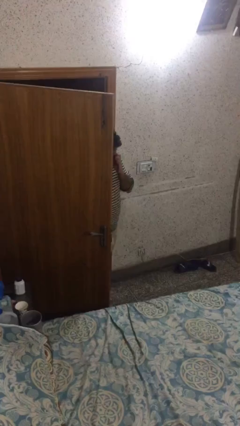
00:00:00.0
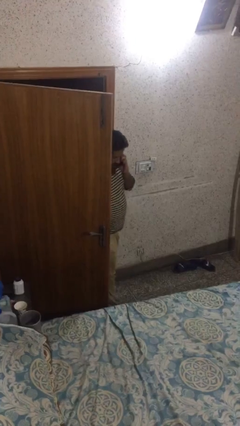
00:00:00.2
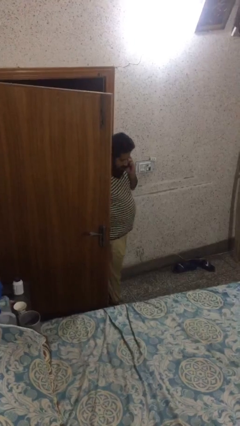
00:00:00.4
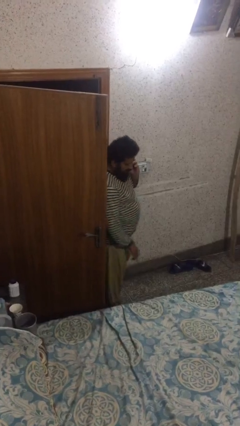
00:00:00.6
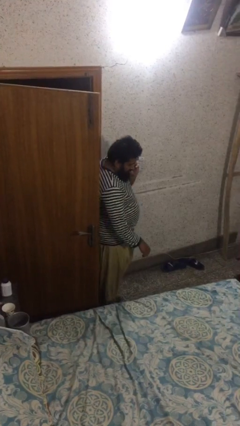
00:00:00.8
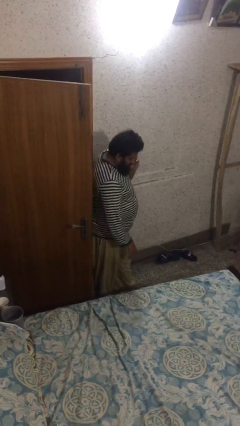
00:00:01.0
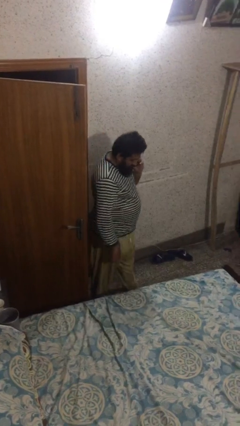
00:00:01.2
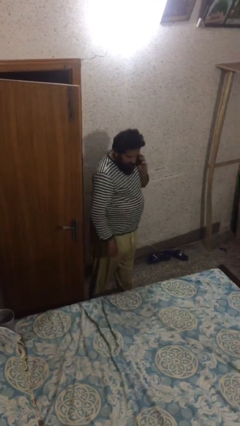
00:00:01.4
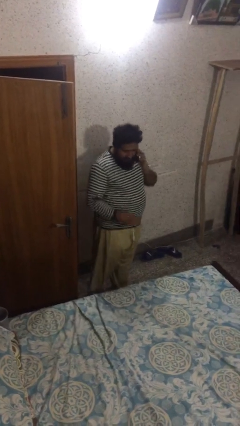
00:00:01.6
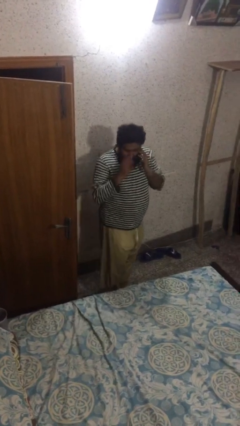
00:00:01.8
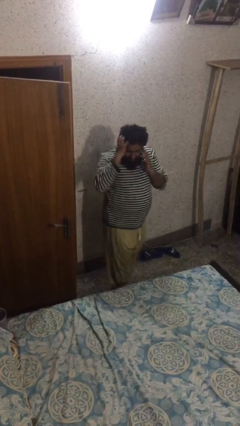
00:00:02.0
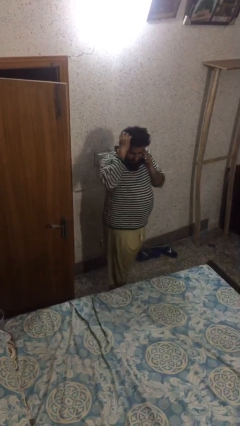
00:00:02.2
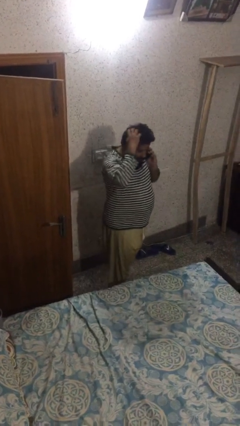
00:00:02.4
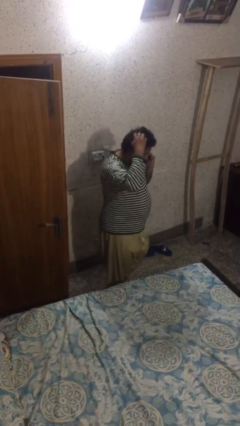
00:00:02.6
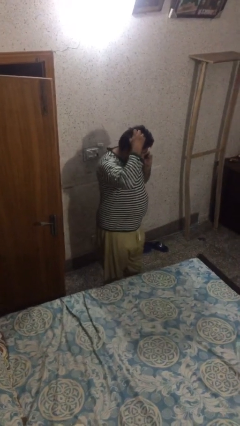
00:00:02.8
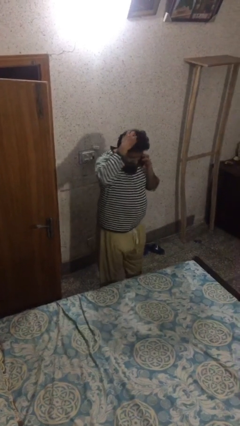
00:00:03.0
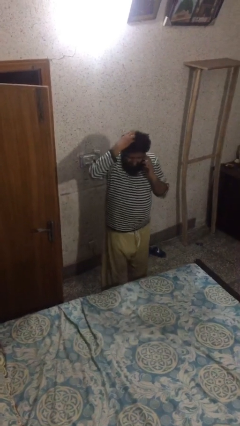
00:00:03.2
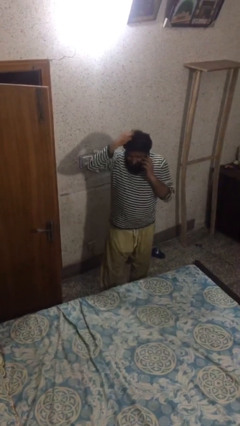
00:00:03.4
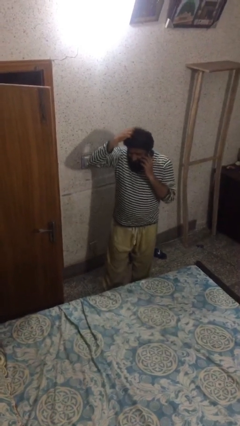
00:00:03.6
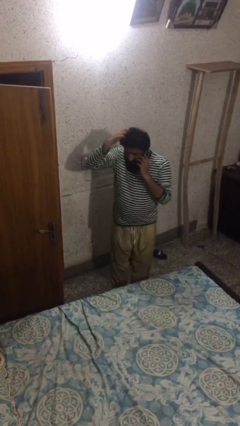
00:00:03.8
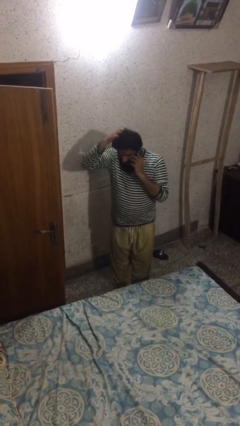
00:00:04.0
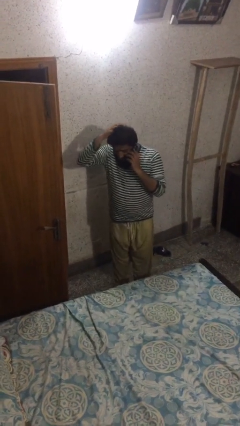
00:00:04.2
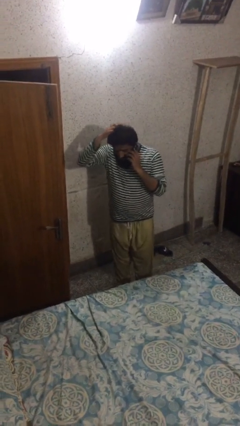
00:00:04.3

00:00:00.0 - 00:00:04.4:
person enters scene through structure

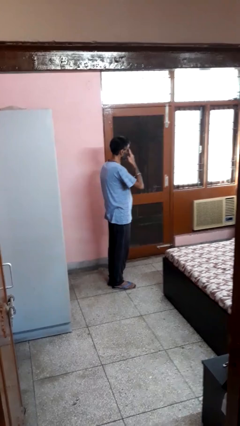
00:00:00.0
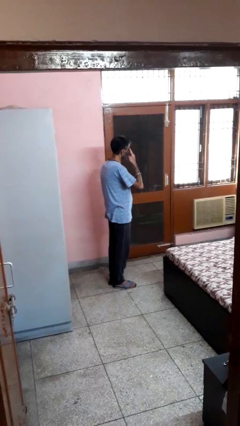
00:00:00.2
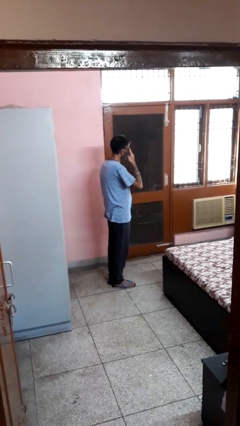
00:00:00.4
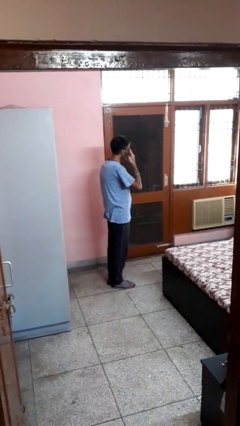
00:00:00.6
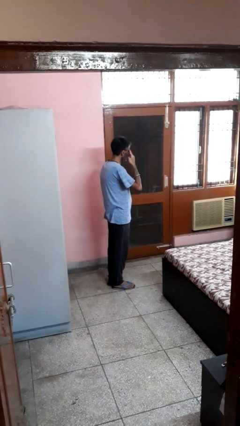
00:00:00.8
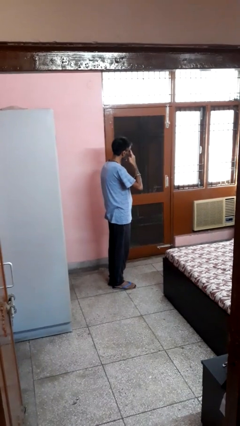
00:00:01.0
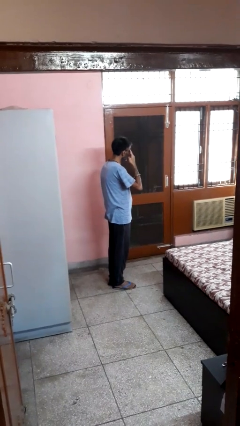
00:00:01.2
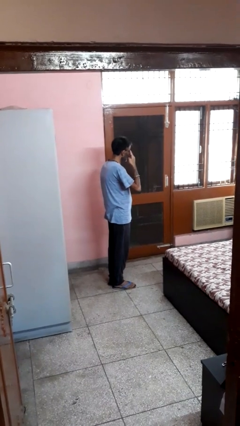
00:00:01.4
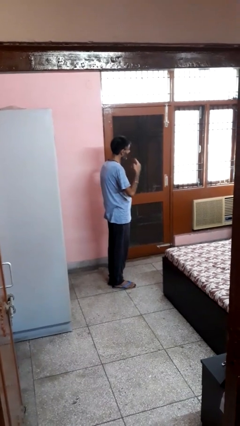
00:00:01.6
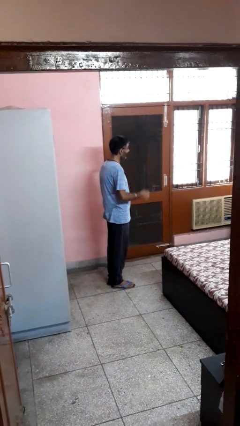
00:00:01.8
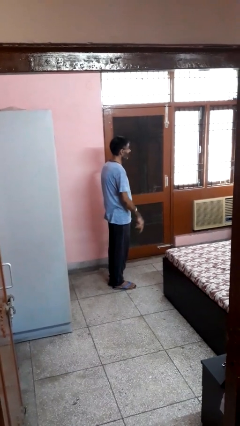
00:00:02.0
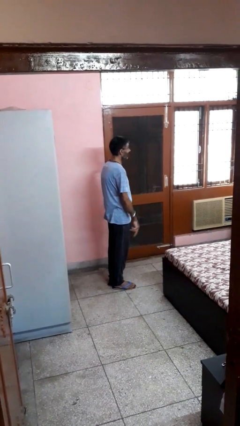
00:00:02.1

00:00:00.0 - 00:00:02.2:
person rubs eyes

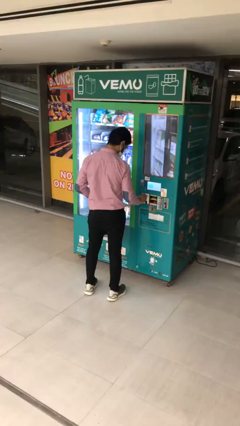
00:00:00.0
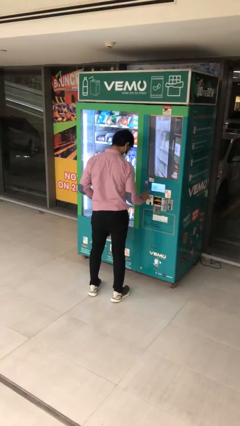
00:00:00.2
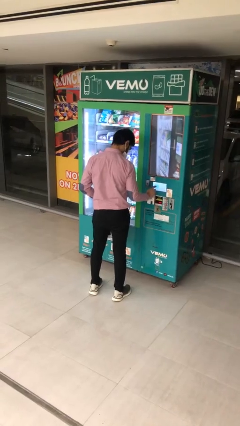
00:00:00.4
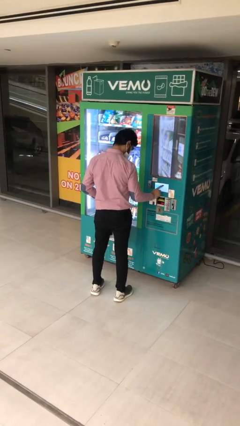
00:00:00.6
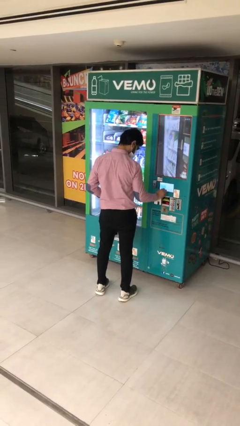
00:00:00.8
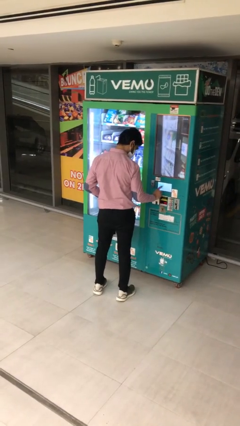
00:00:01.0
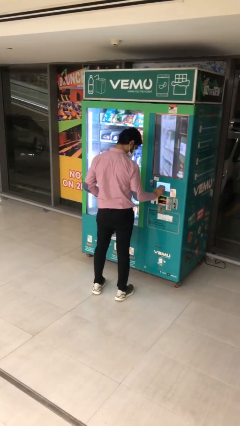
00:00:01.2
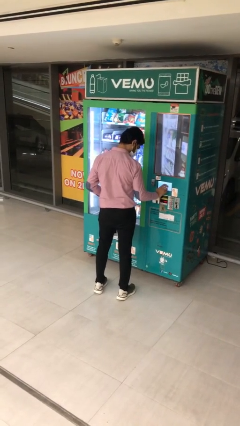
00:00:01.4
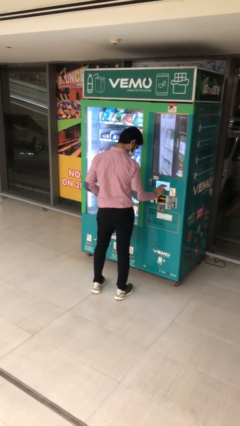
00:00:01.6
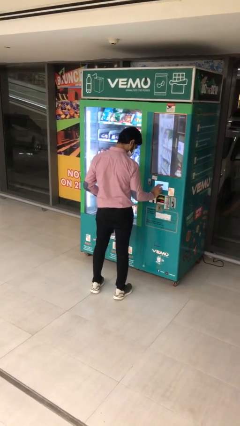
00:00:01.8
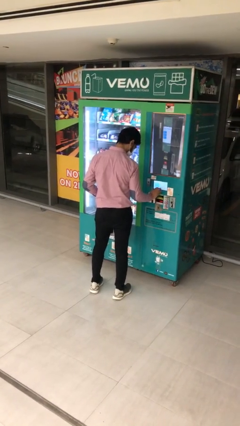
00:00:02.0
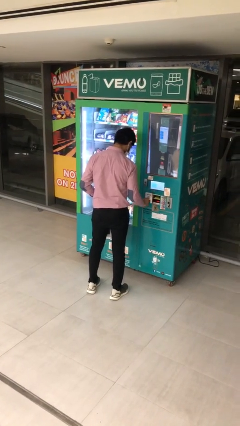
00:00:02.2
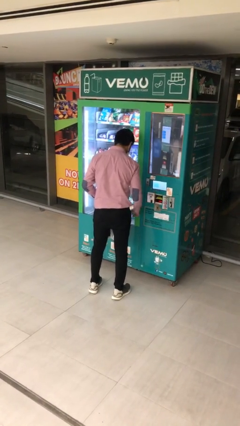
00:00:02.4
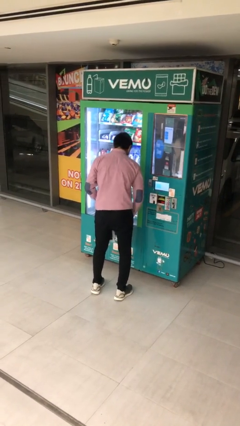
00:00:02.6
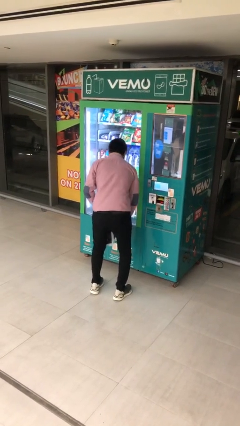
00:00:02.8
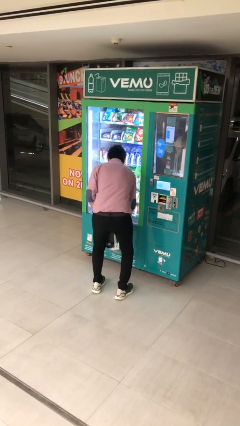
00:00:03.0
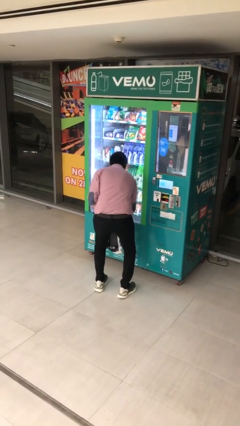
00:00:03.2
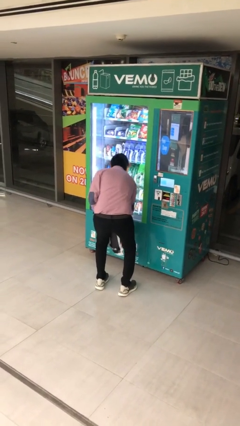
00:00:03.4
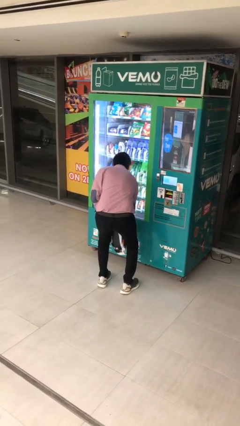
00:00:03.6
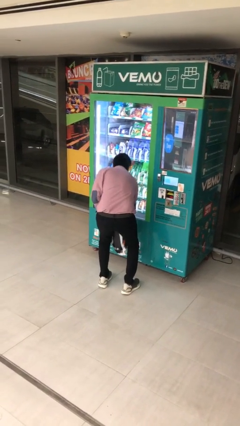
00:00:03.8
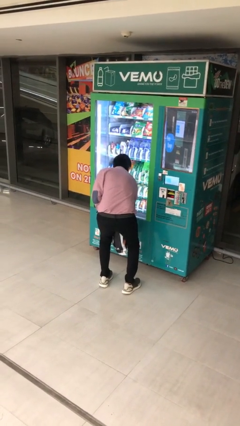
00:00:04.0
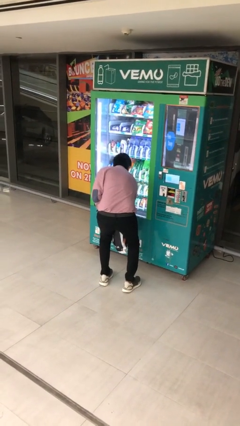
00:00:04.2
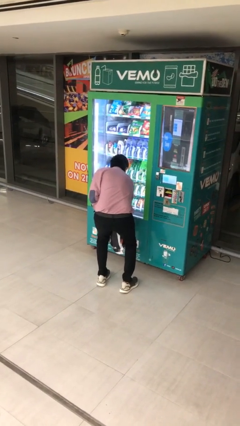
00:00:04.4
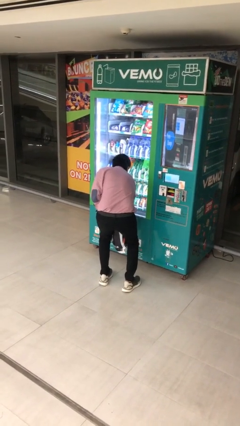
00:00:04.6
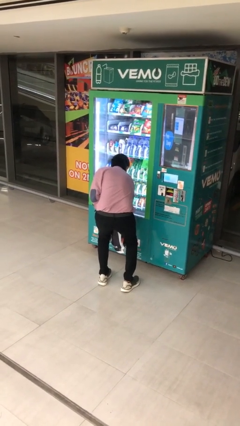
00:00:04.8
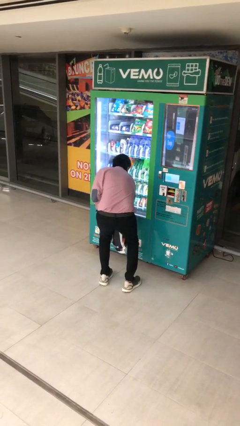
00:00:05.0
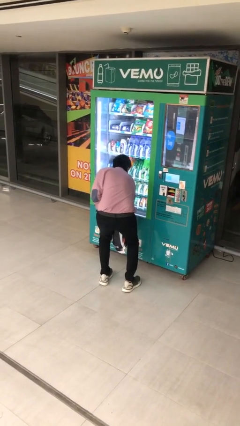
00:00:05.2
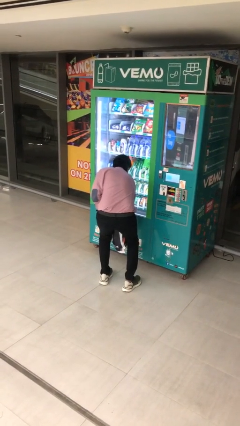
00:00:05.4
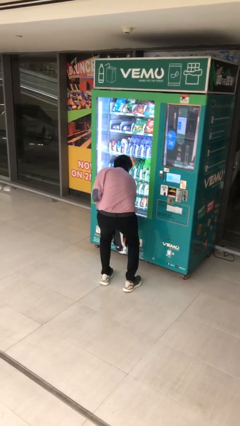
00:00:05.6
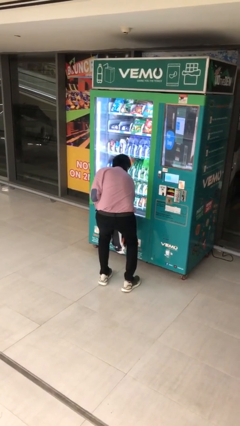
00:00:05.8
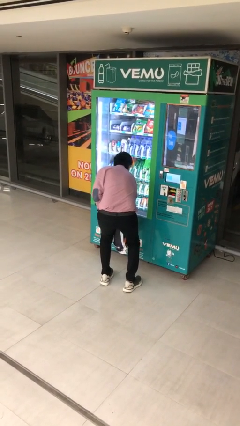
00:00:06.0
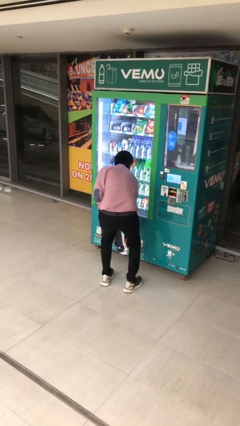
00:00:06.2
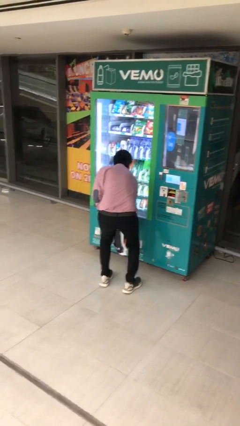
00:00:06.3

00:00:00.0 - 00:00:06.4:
person purchases from machine

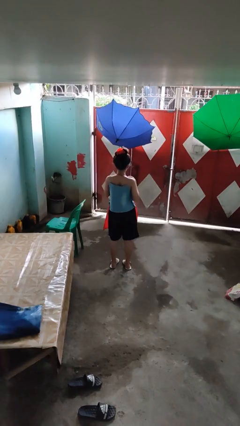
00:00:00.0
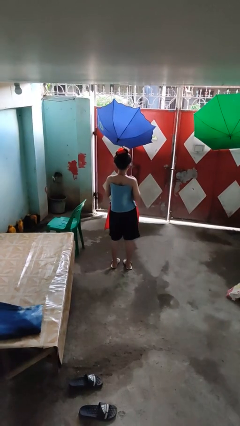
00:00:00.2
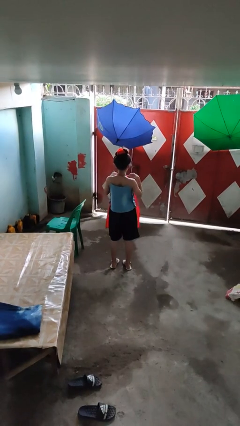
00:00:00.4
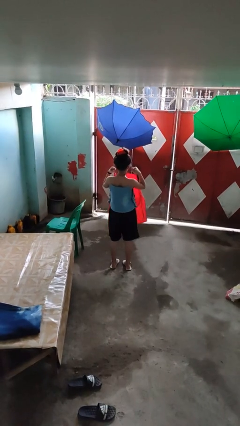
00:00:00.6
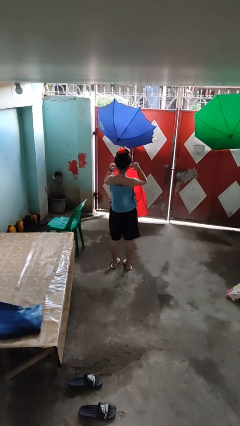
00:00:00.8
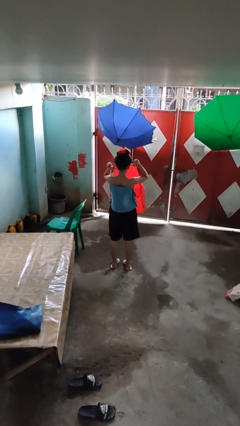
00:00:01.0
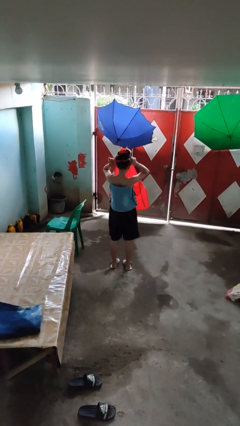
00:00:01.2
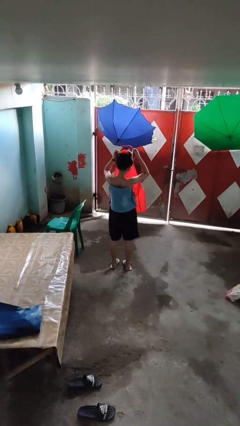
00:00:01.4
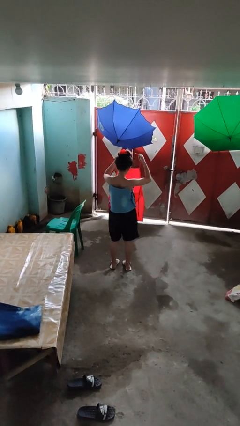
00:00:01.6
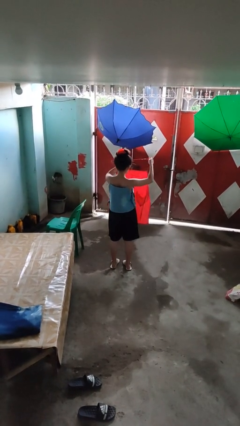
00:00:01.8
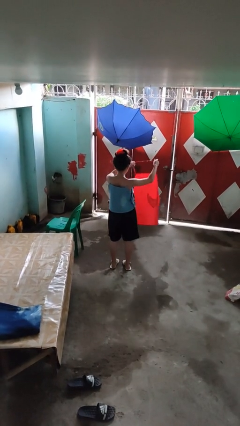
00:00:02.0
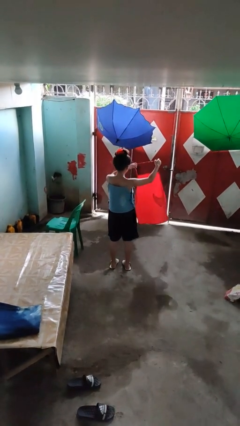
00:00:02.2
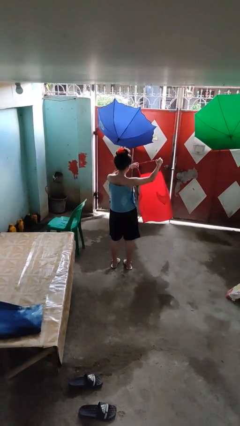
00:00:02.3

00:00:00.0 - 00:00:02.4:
person takes off apron

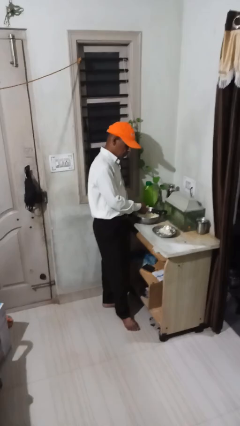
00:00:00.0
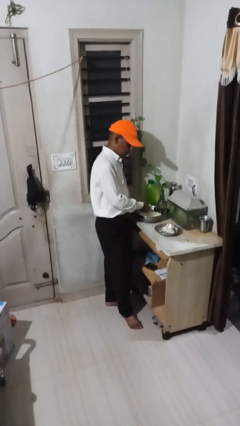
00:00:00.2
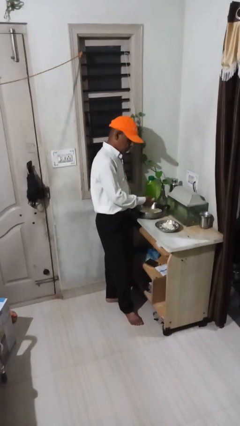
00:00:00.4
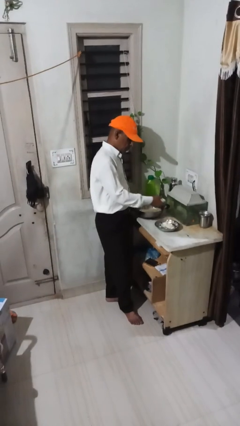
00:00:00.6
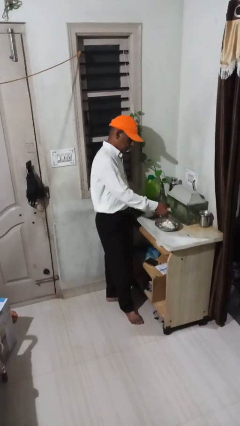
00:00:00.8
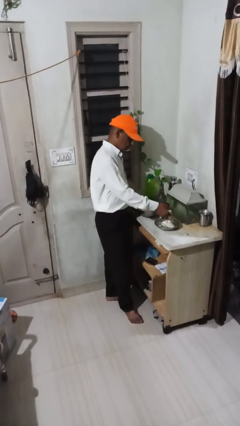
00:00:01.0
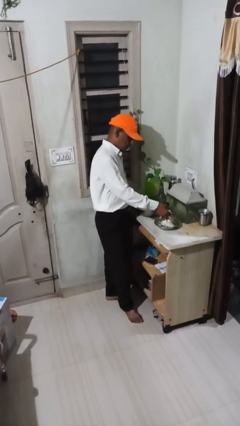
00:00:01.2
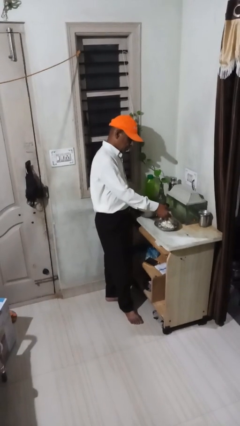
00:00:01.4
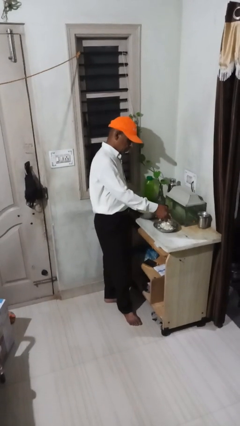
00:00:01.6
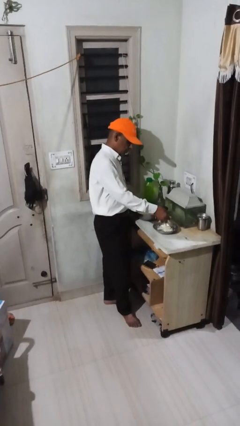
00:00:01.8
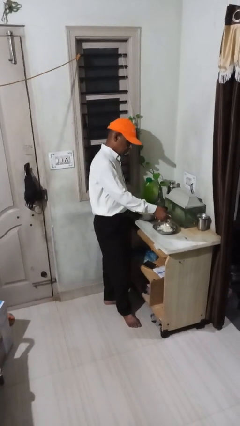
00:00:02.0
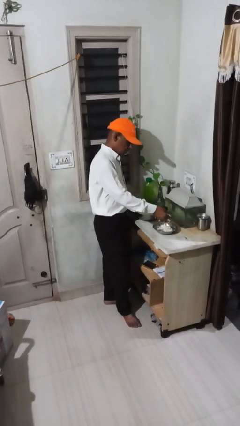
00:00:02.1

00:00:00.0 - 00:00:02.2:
person pours into bowl

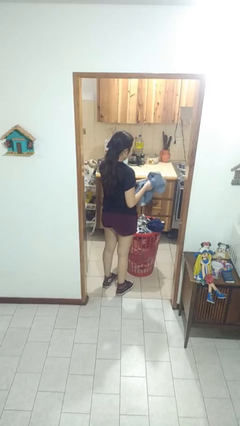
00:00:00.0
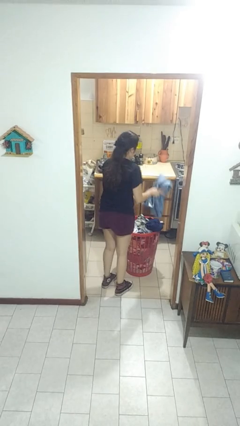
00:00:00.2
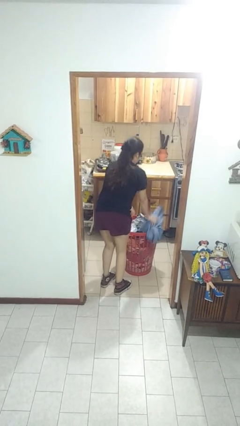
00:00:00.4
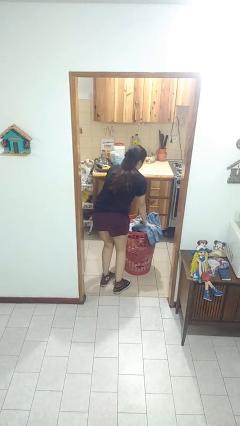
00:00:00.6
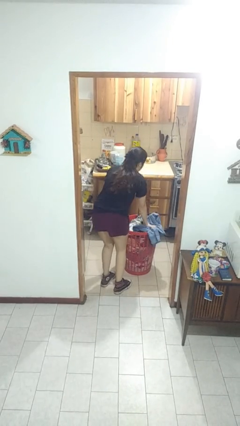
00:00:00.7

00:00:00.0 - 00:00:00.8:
person puts object into basket
